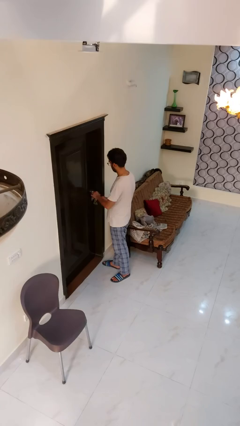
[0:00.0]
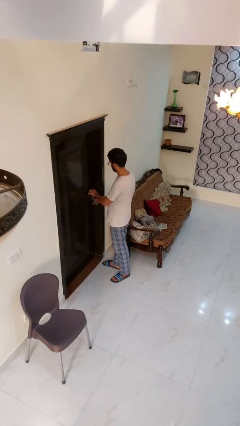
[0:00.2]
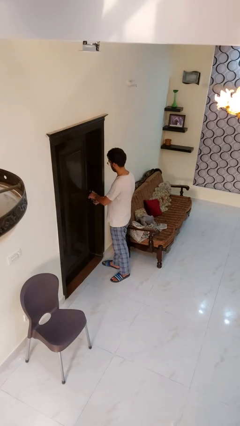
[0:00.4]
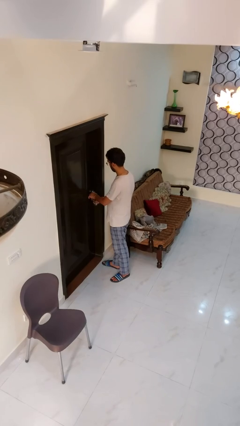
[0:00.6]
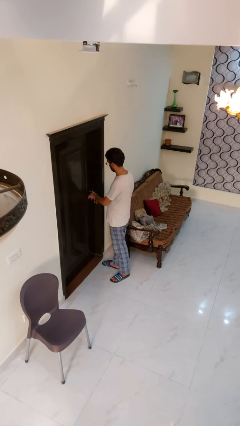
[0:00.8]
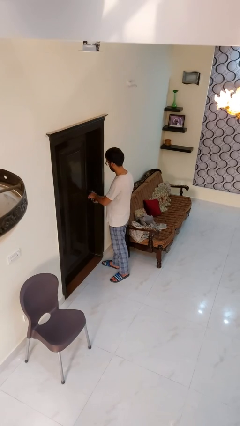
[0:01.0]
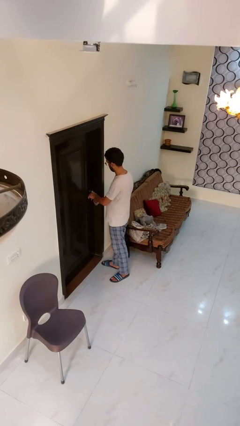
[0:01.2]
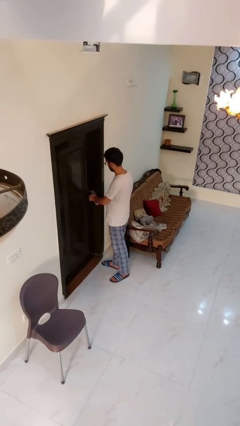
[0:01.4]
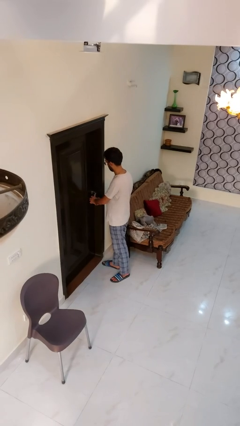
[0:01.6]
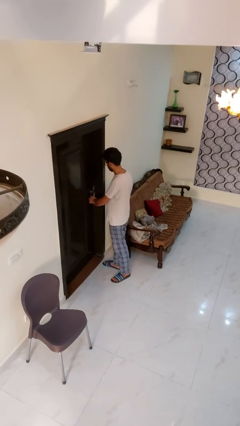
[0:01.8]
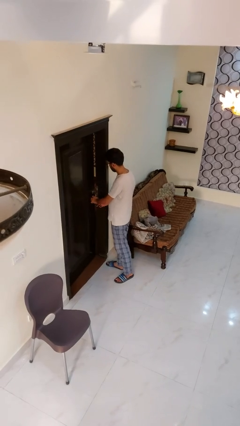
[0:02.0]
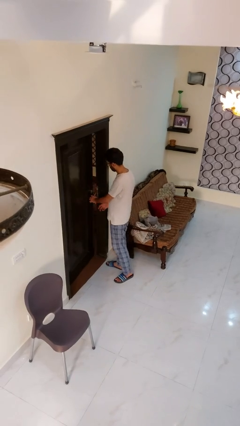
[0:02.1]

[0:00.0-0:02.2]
person unlocks door with keys

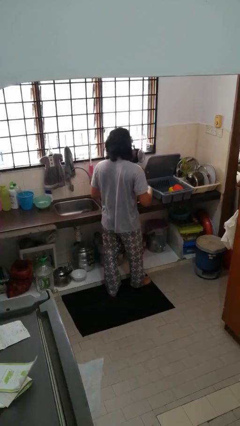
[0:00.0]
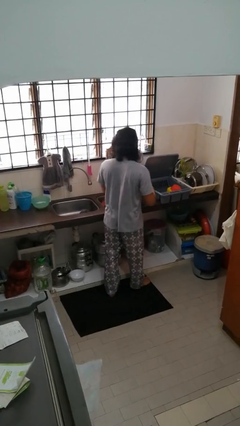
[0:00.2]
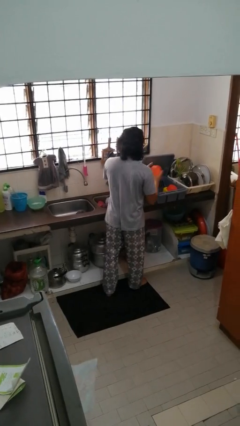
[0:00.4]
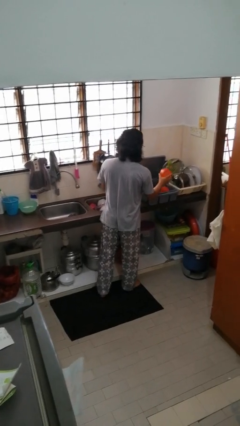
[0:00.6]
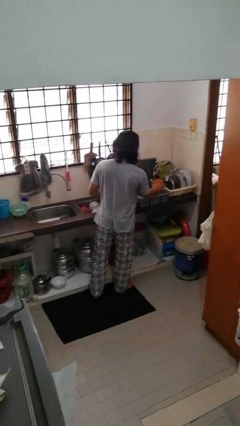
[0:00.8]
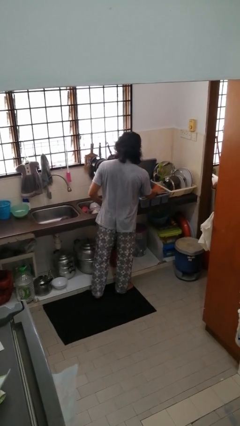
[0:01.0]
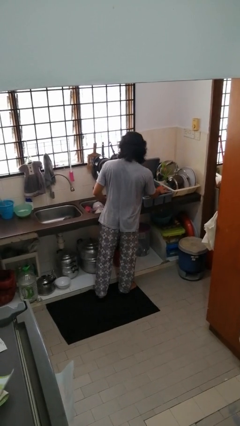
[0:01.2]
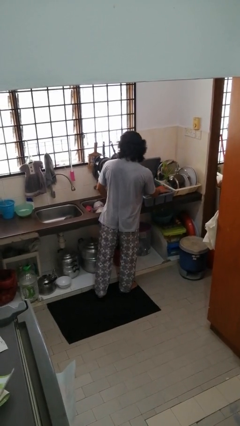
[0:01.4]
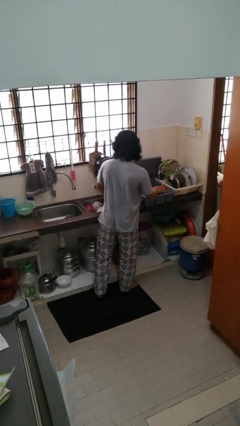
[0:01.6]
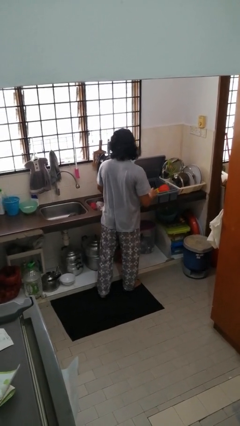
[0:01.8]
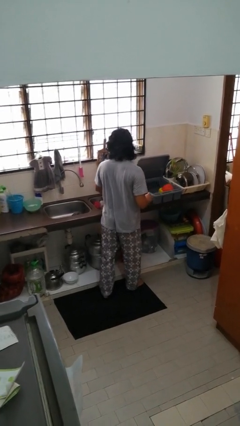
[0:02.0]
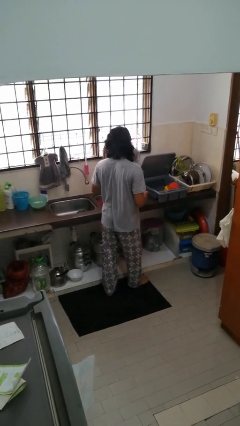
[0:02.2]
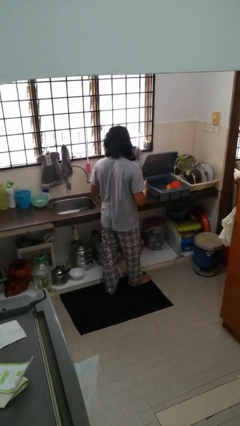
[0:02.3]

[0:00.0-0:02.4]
person loads dishwasher

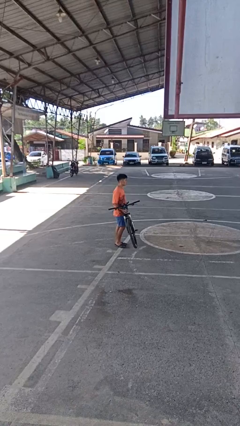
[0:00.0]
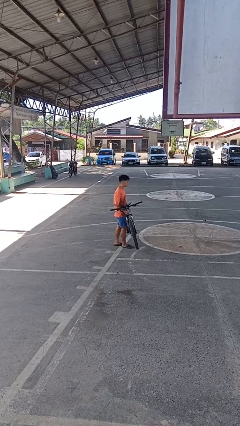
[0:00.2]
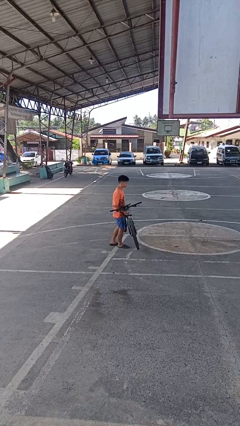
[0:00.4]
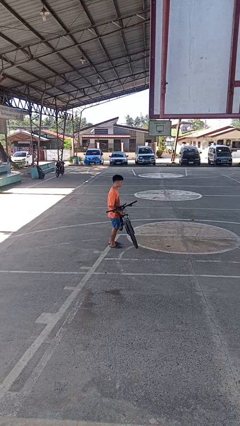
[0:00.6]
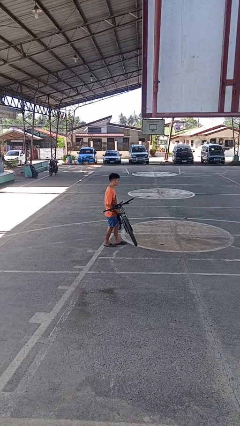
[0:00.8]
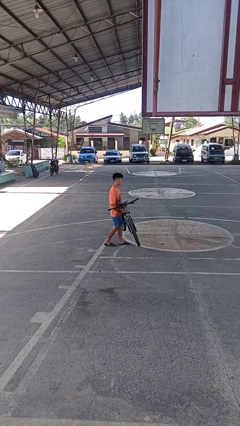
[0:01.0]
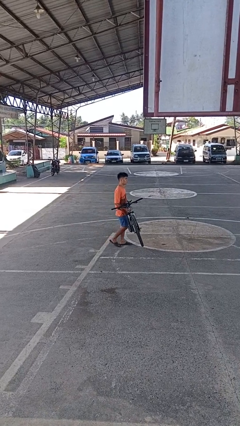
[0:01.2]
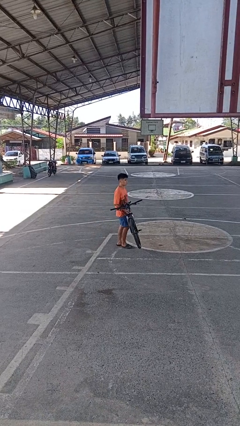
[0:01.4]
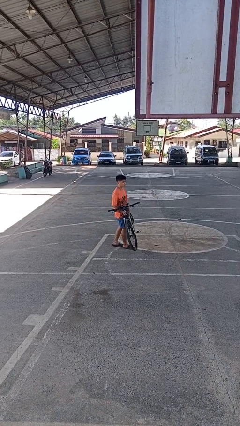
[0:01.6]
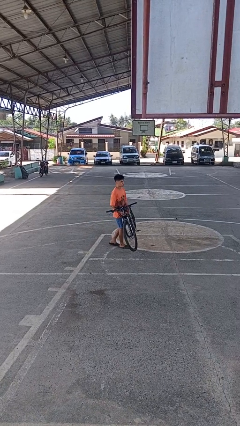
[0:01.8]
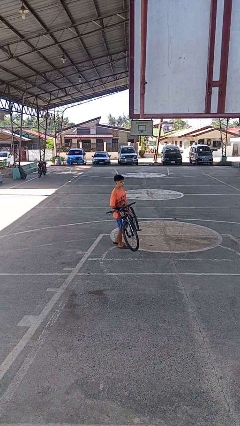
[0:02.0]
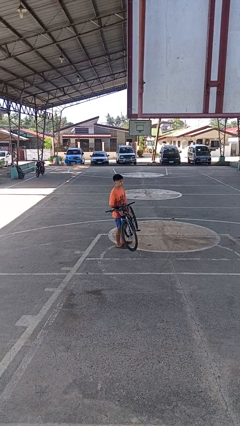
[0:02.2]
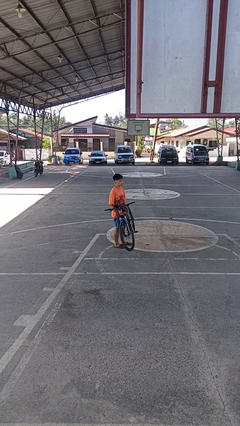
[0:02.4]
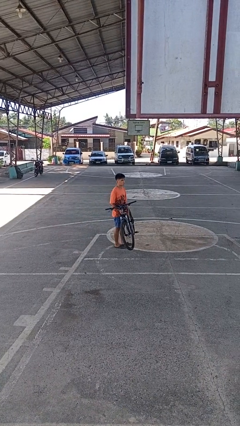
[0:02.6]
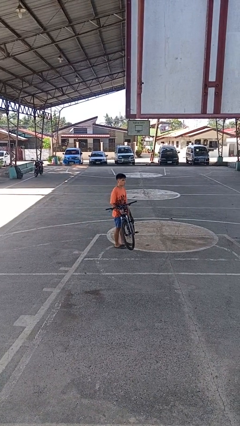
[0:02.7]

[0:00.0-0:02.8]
person carries bicycle

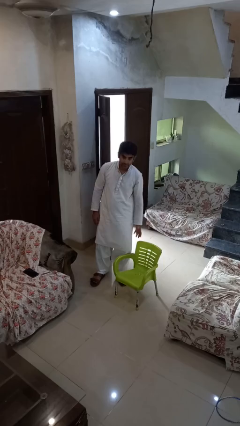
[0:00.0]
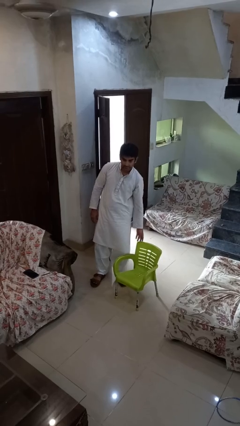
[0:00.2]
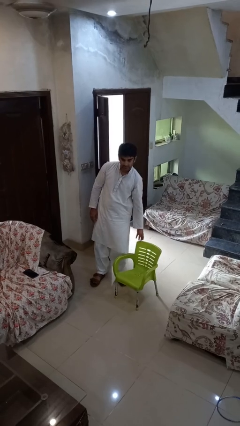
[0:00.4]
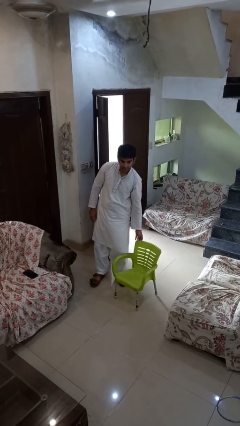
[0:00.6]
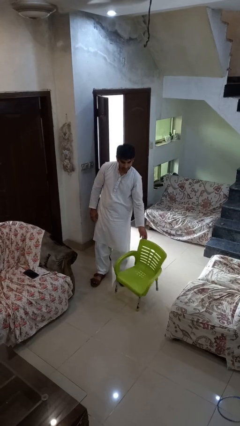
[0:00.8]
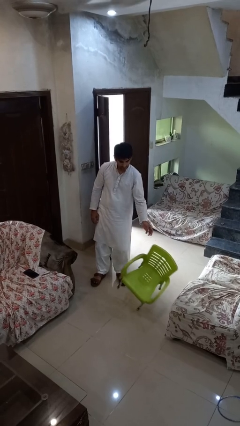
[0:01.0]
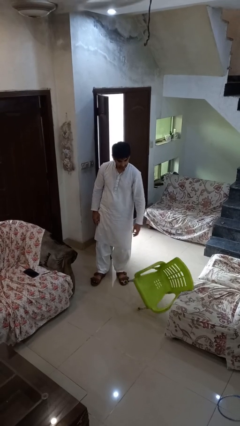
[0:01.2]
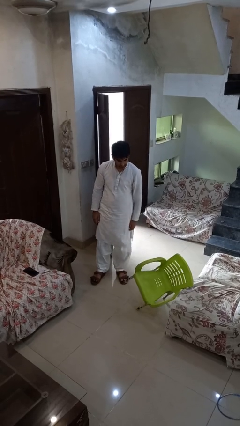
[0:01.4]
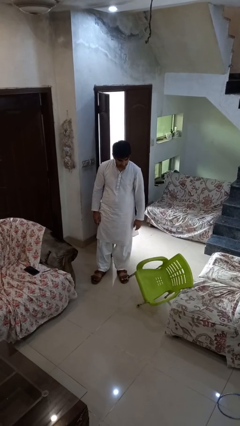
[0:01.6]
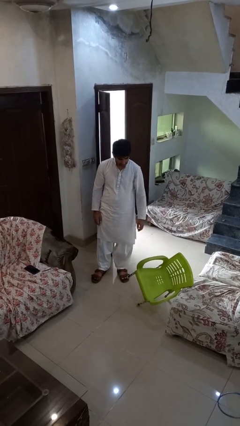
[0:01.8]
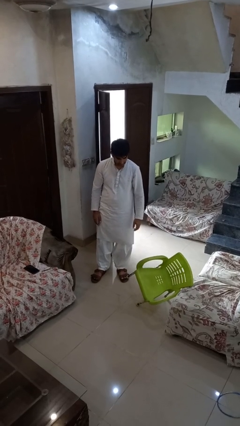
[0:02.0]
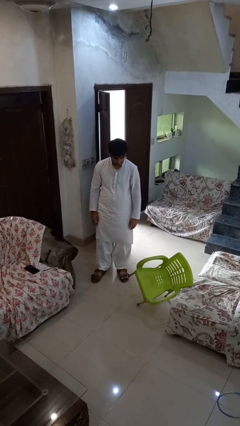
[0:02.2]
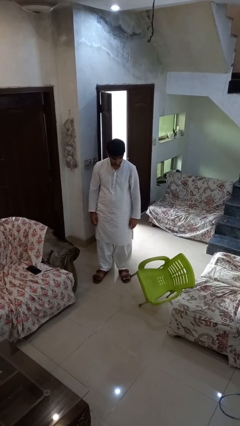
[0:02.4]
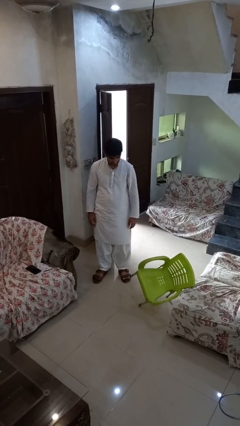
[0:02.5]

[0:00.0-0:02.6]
person knocks over furniture

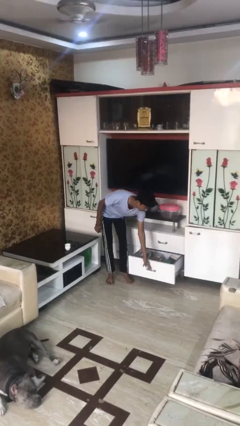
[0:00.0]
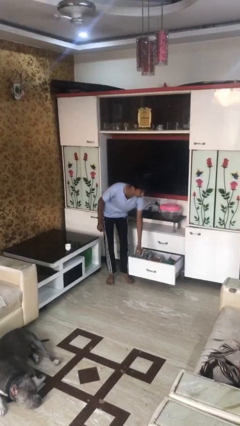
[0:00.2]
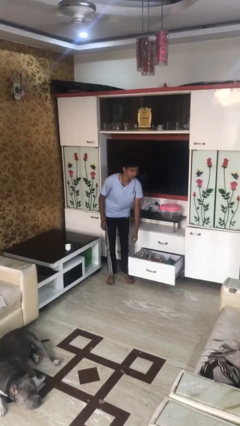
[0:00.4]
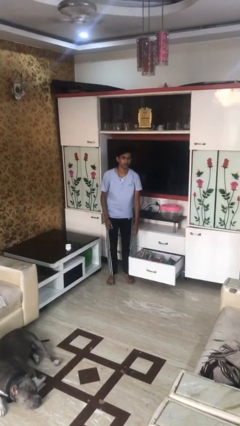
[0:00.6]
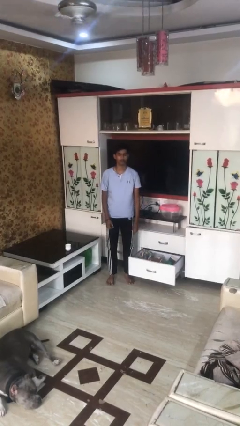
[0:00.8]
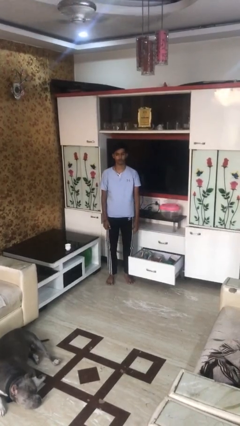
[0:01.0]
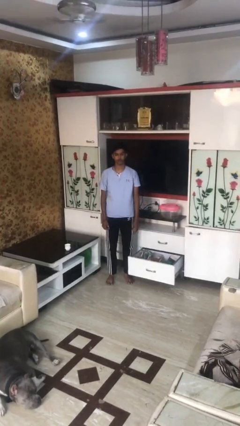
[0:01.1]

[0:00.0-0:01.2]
person opens dresser drawer

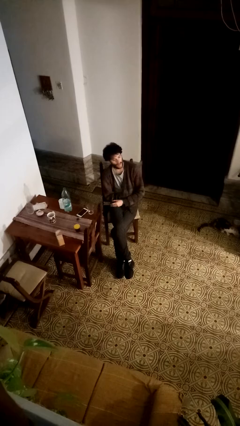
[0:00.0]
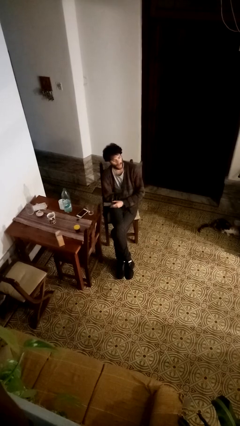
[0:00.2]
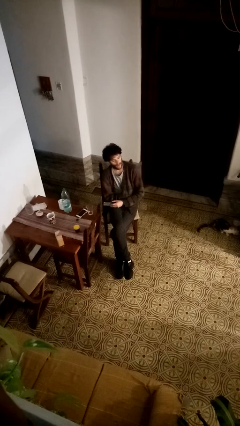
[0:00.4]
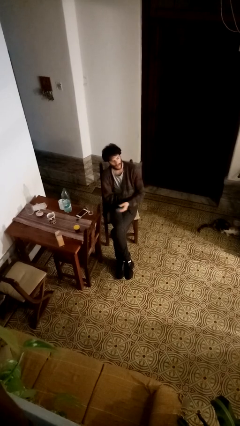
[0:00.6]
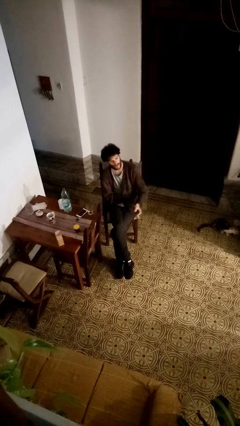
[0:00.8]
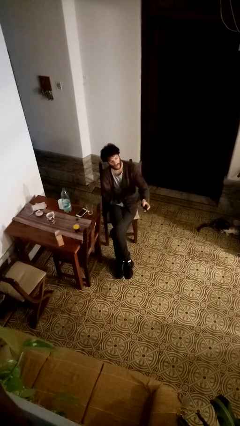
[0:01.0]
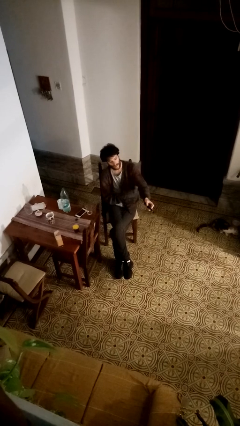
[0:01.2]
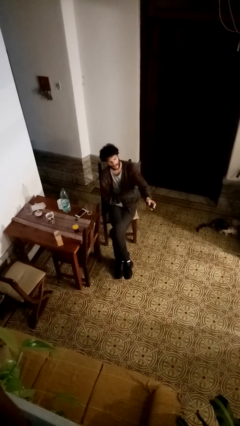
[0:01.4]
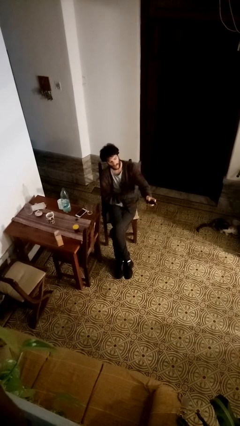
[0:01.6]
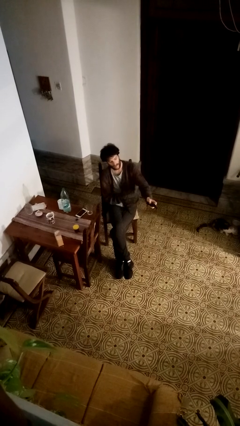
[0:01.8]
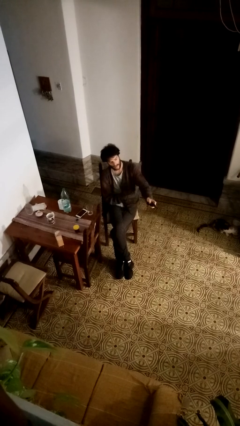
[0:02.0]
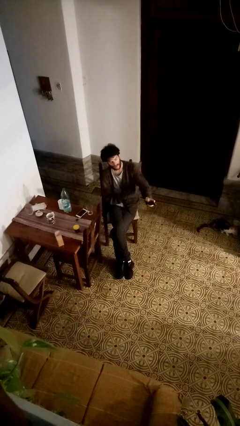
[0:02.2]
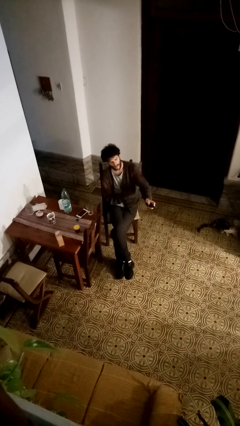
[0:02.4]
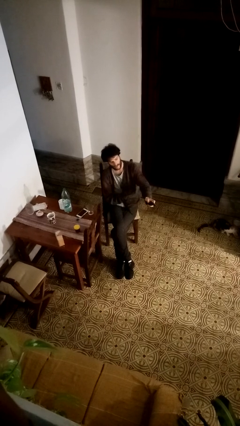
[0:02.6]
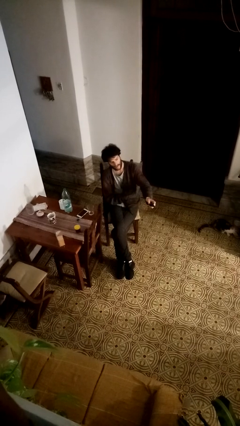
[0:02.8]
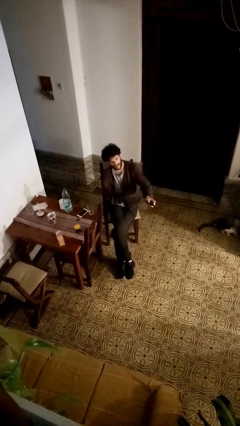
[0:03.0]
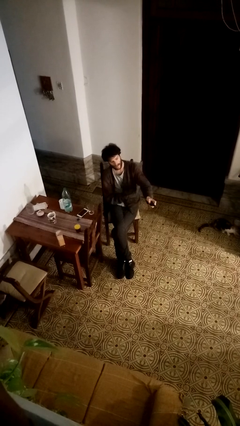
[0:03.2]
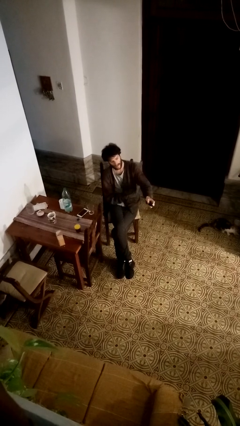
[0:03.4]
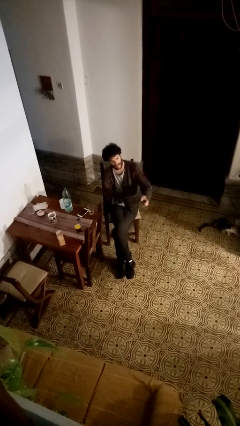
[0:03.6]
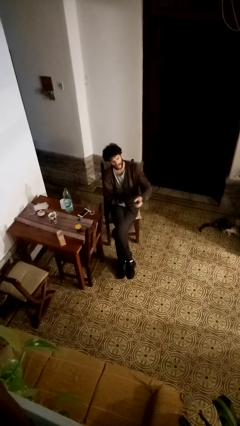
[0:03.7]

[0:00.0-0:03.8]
person uses television remote

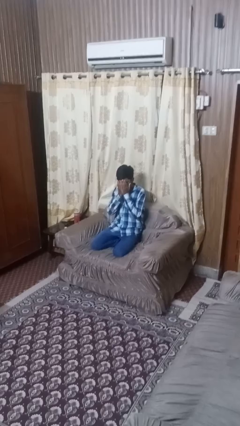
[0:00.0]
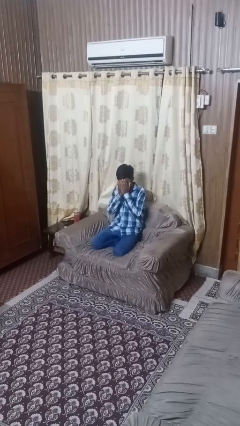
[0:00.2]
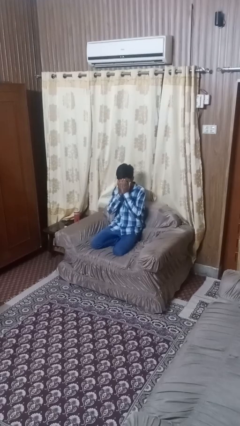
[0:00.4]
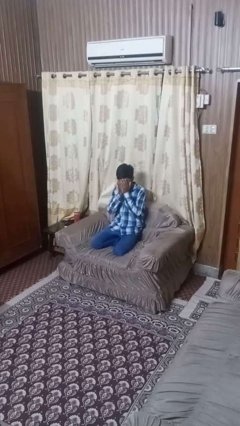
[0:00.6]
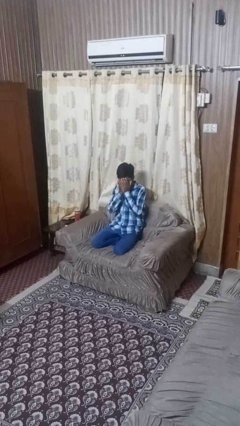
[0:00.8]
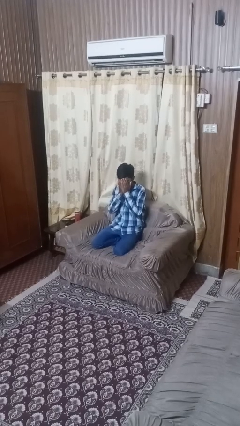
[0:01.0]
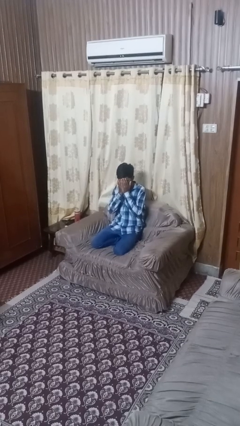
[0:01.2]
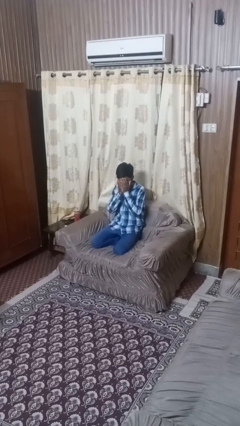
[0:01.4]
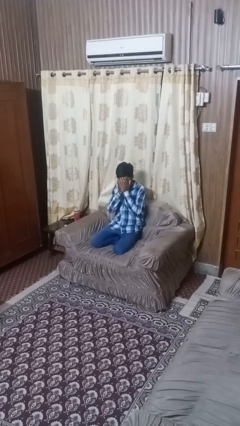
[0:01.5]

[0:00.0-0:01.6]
person covers face with hands

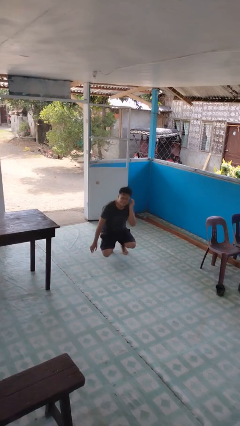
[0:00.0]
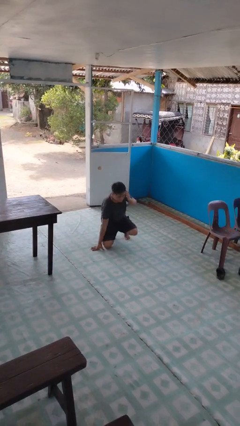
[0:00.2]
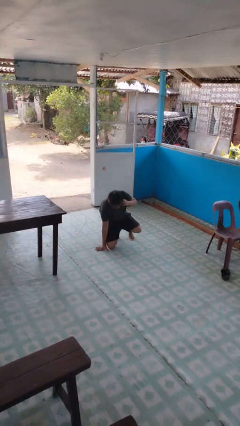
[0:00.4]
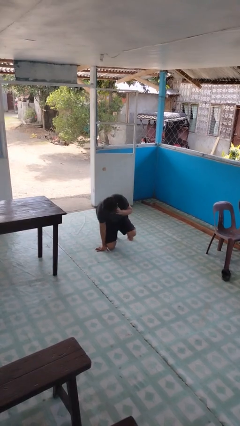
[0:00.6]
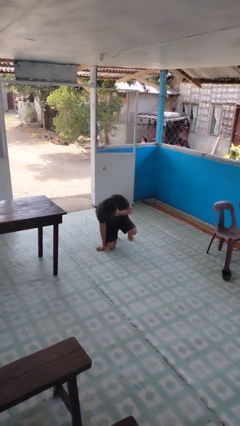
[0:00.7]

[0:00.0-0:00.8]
person falls while standing
